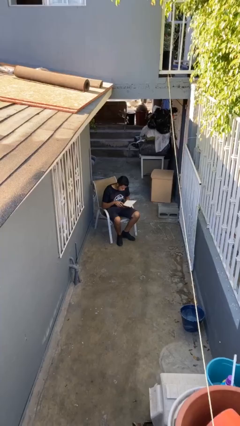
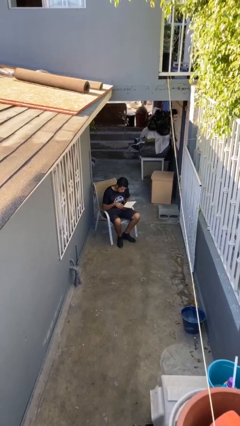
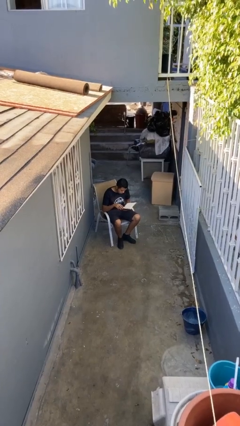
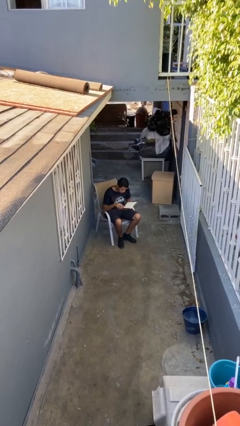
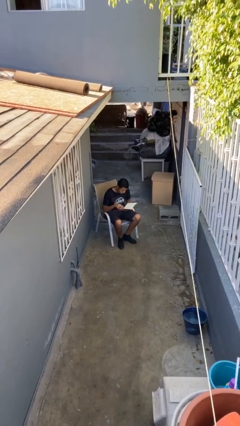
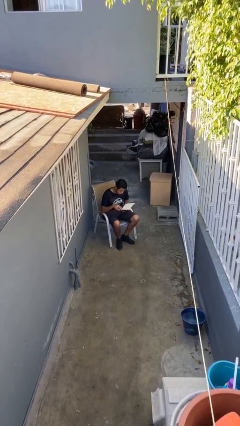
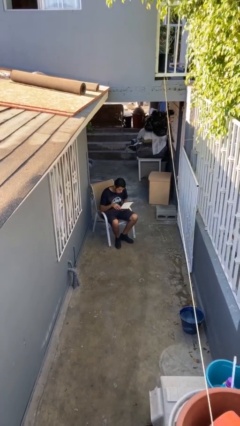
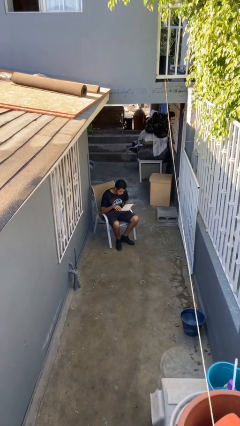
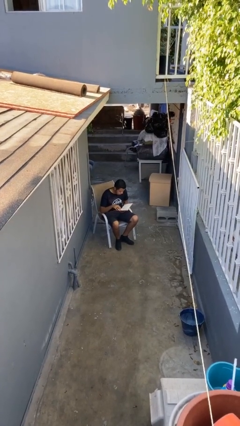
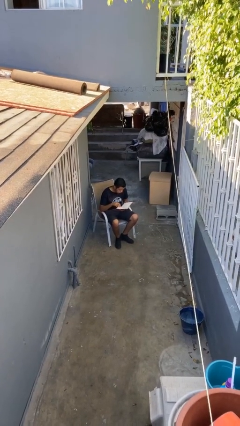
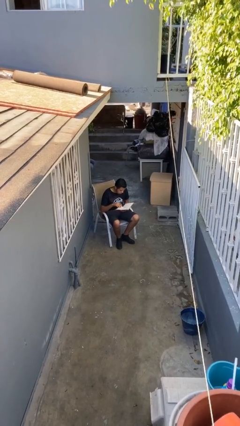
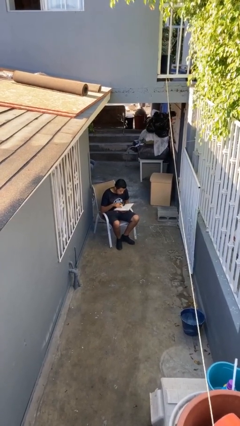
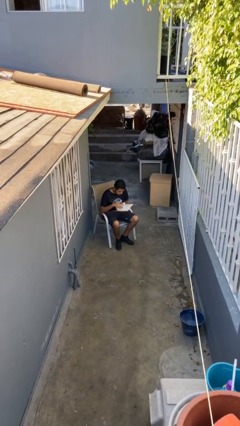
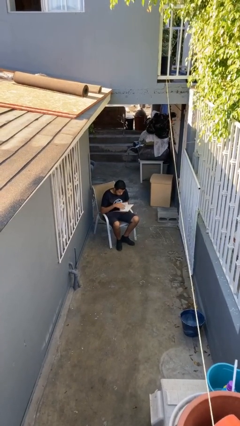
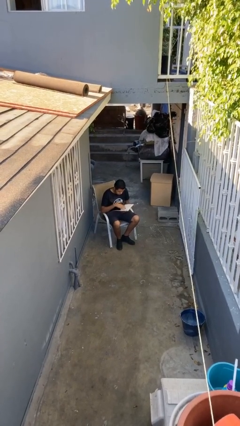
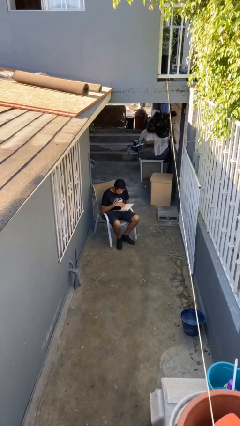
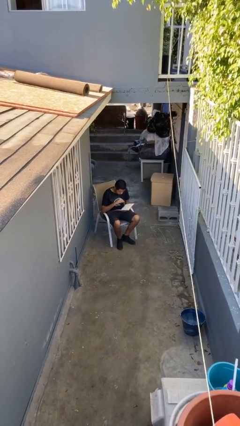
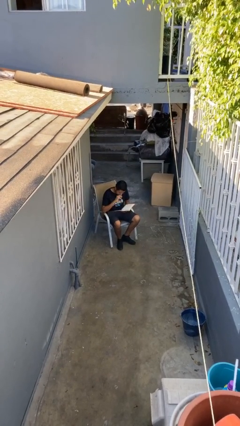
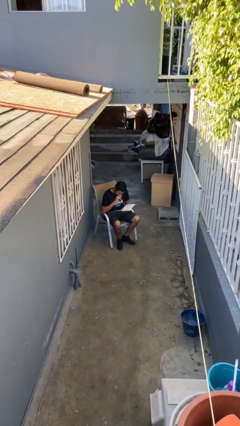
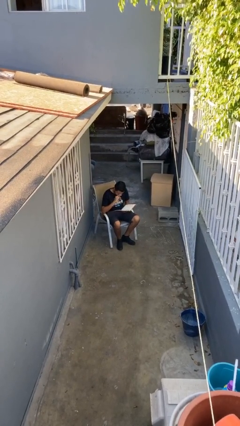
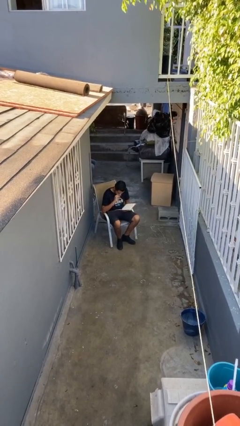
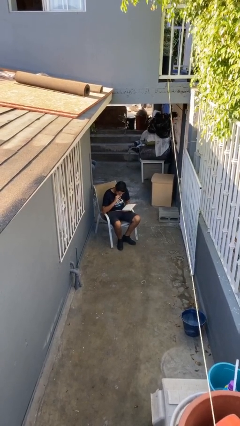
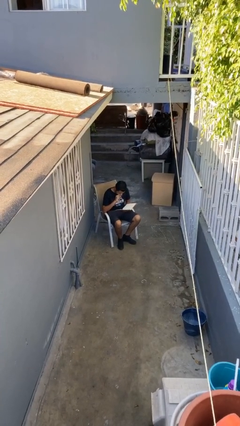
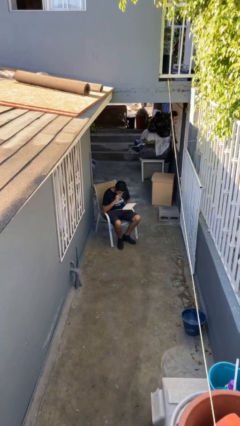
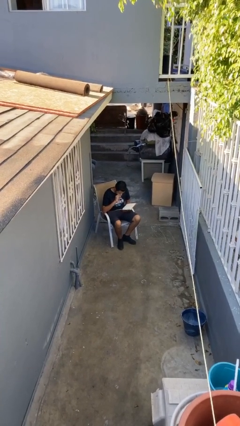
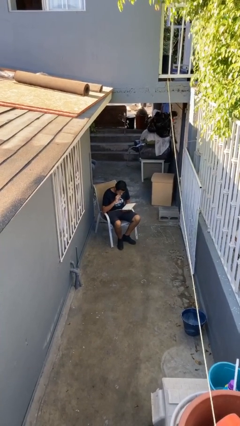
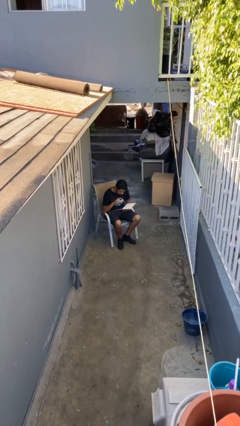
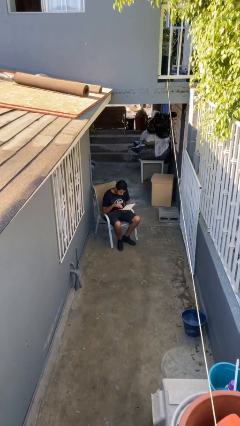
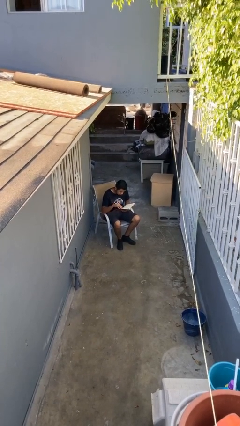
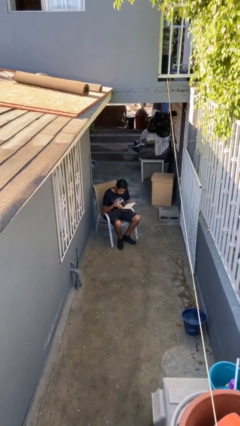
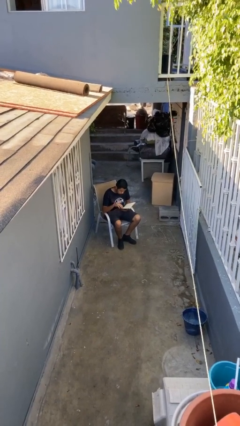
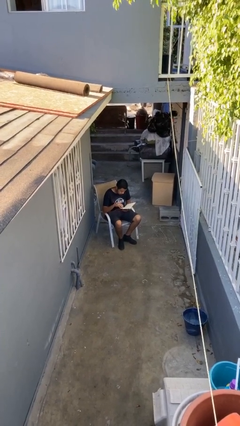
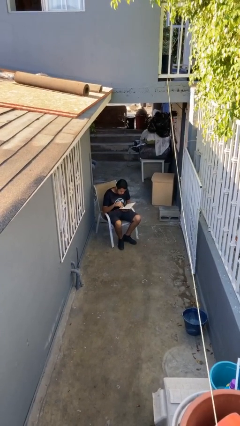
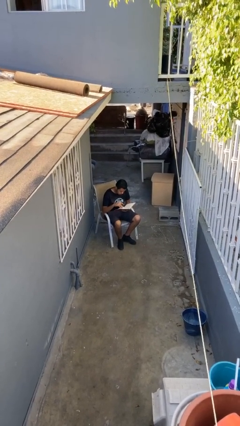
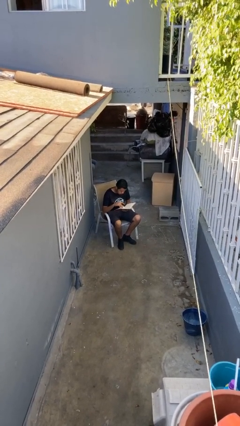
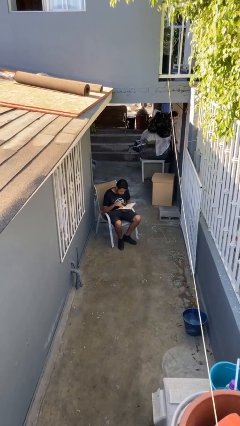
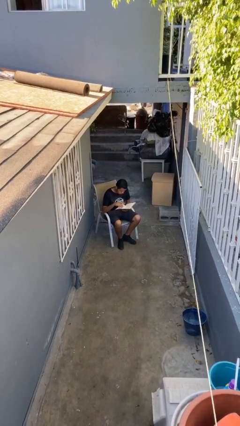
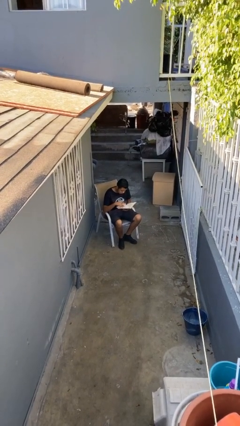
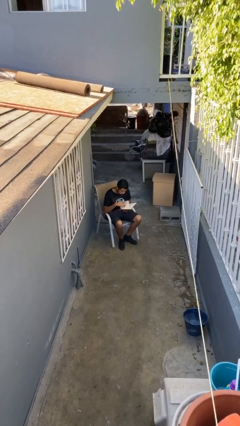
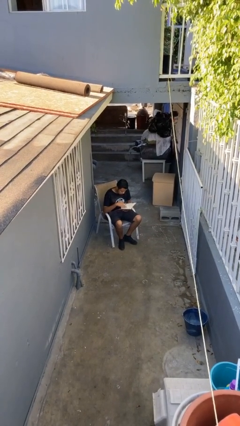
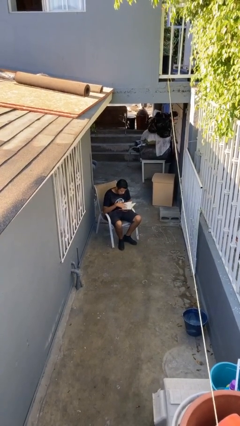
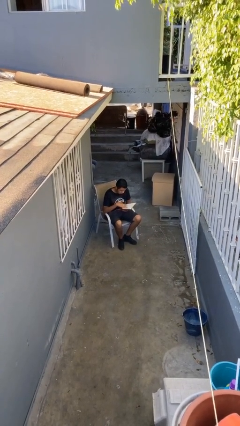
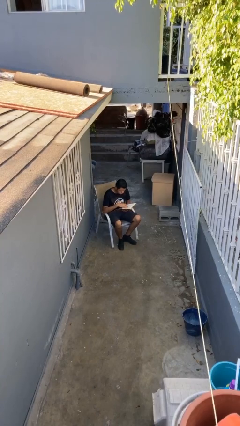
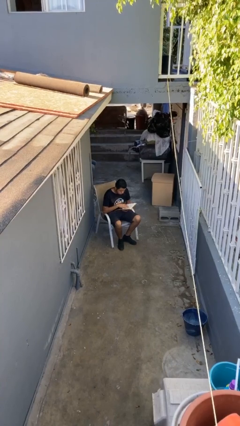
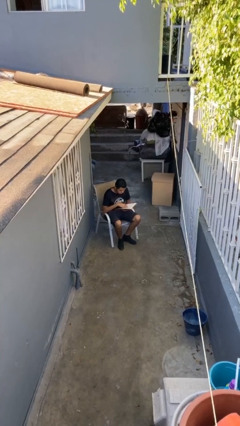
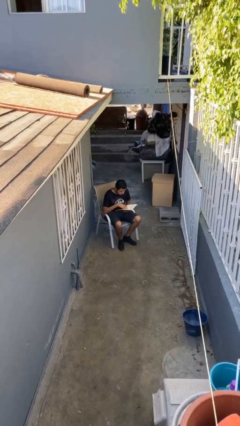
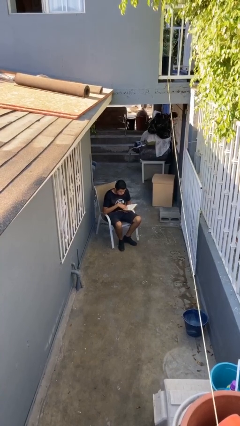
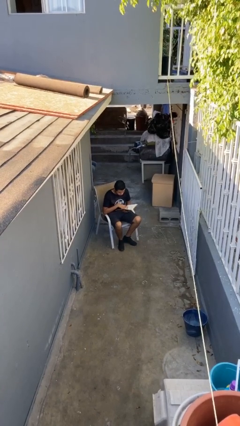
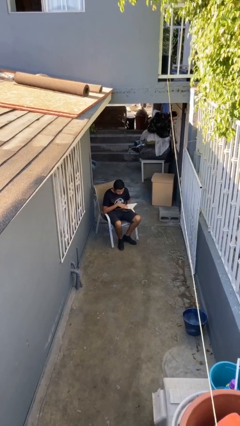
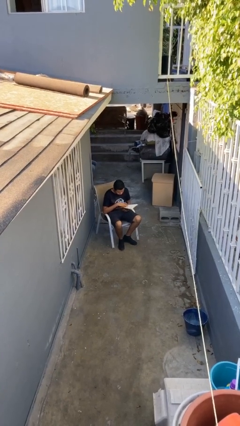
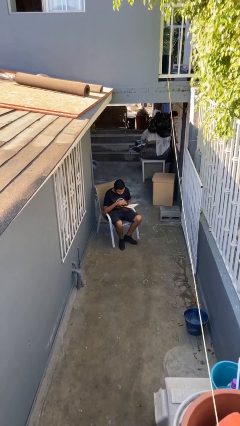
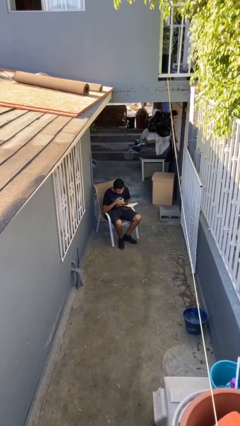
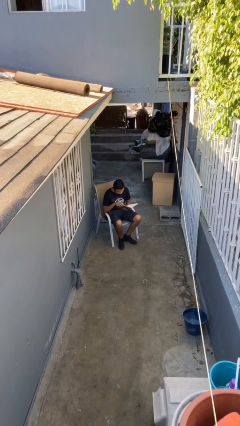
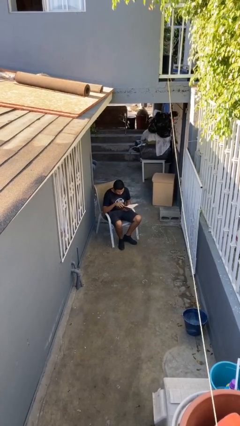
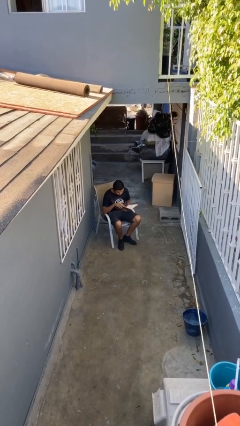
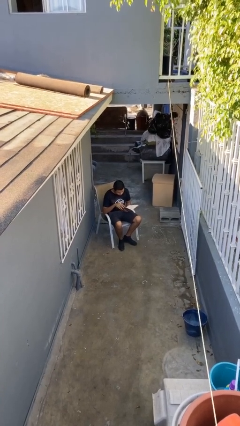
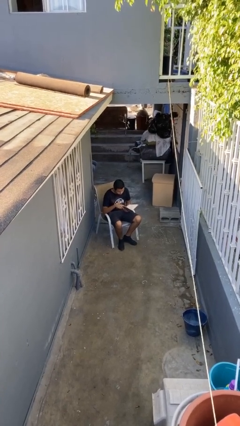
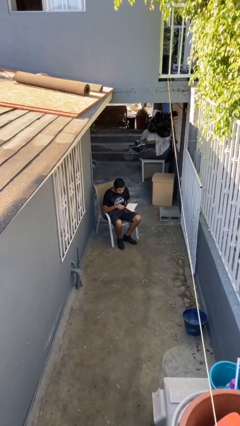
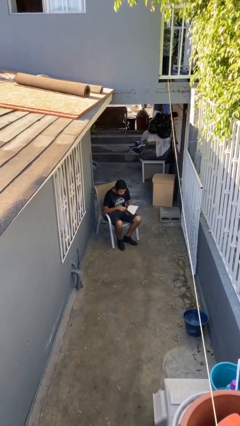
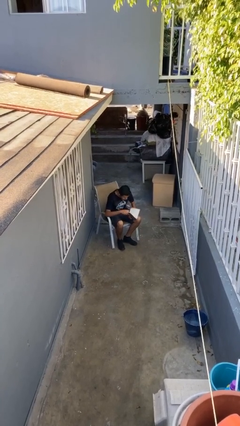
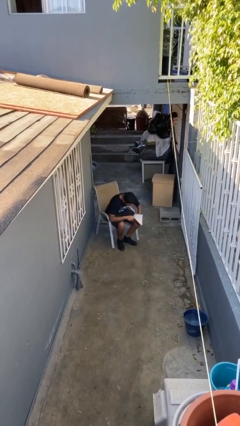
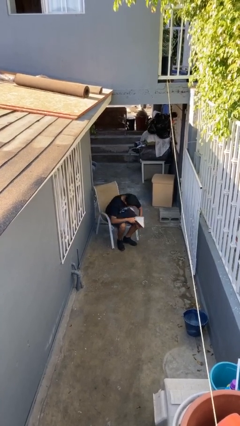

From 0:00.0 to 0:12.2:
person reads document

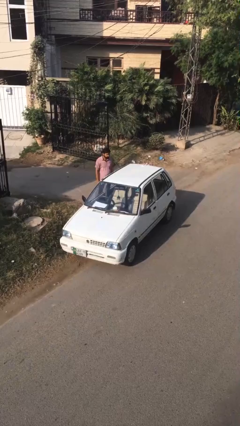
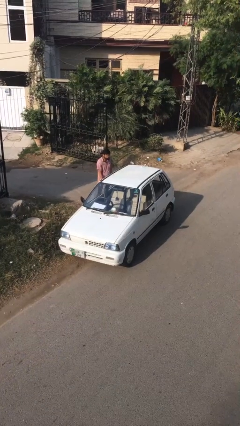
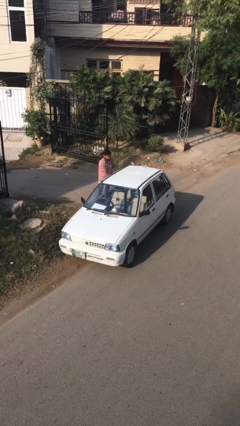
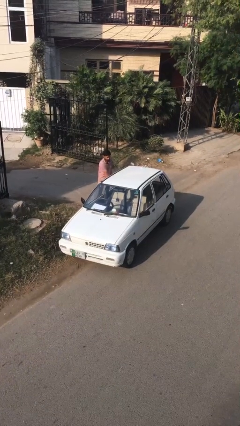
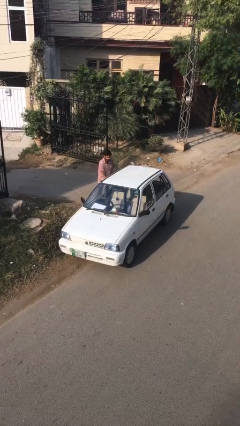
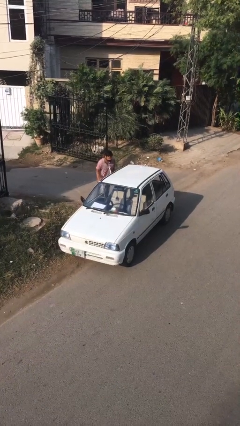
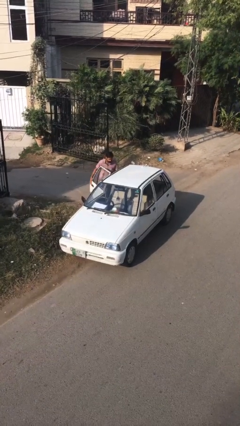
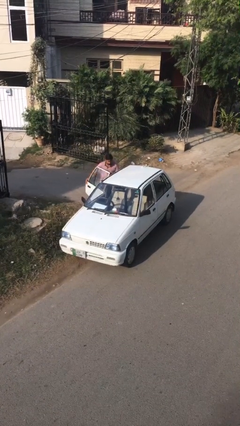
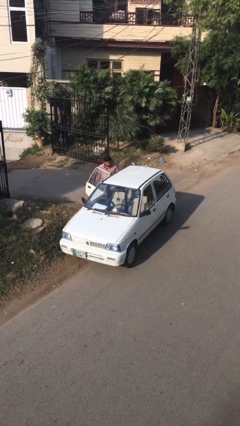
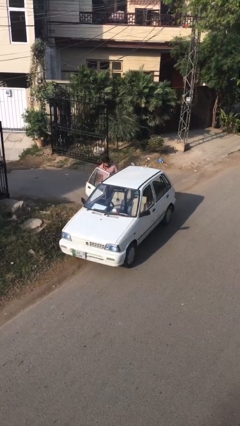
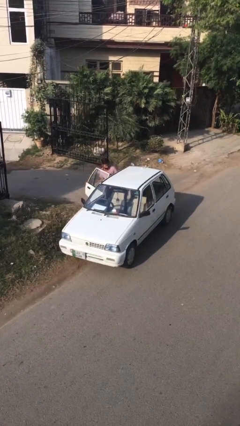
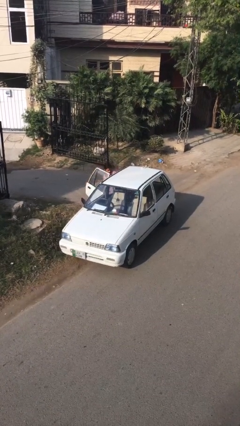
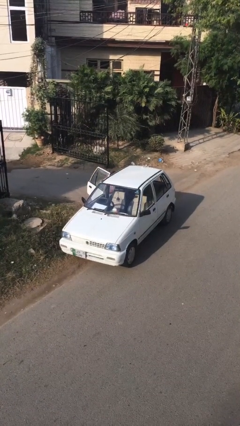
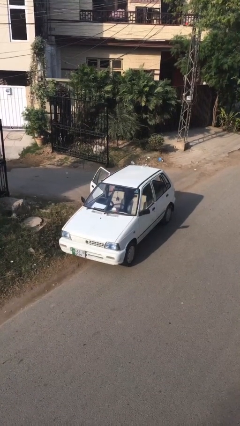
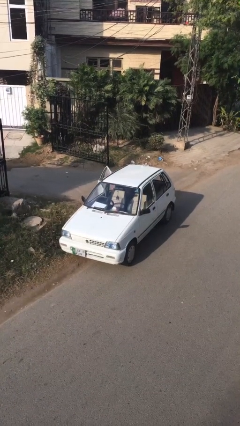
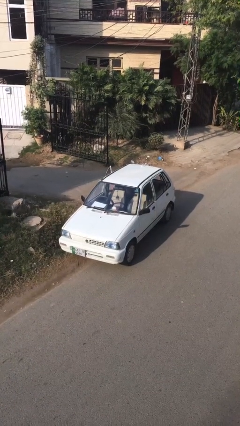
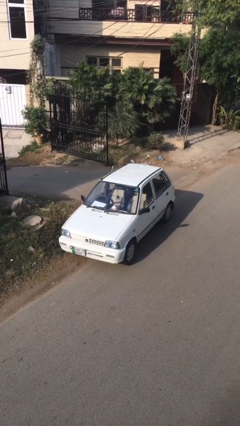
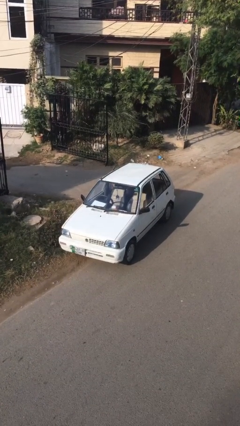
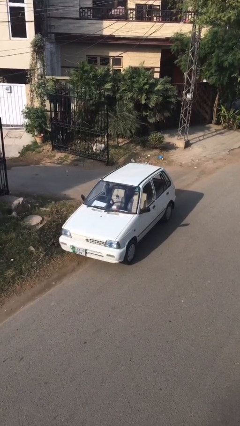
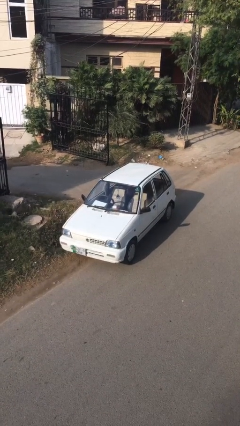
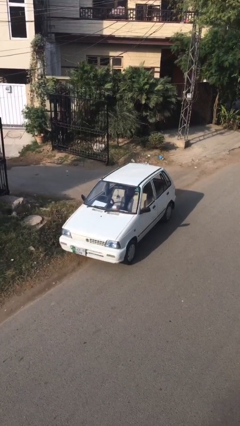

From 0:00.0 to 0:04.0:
car picks up person

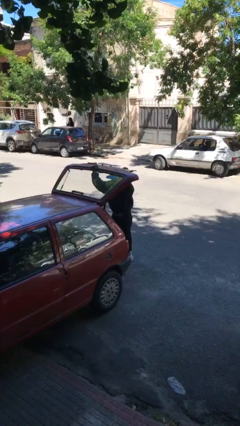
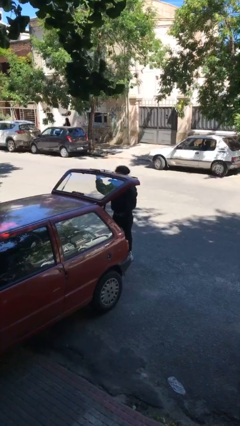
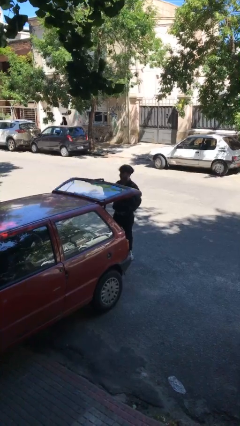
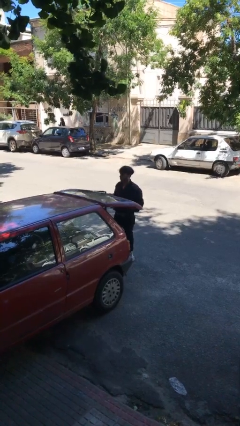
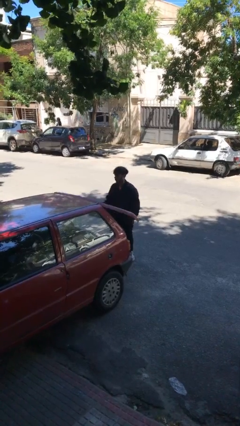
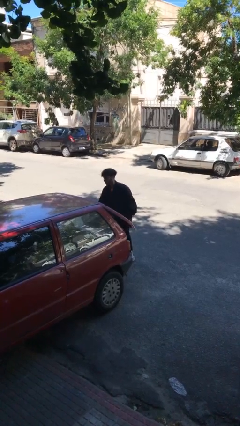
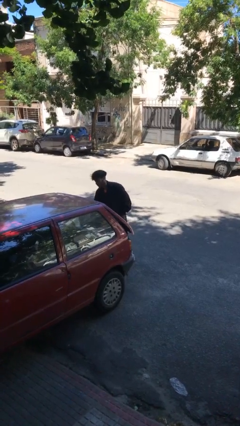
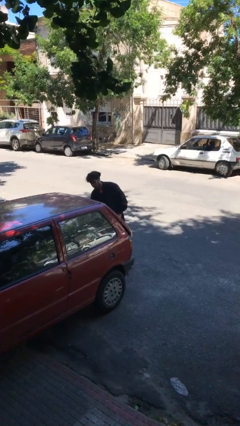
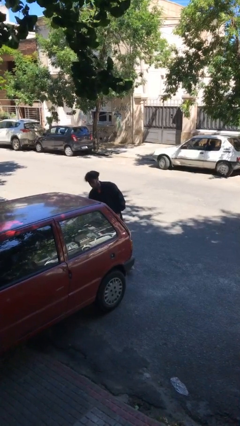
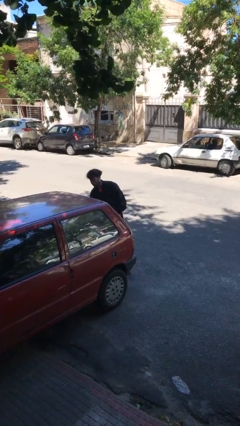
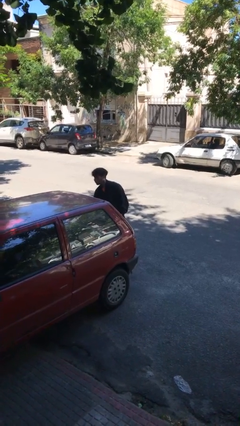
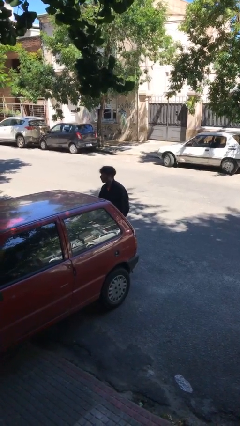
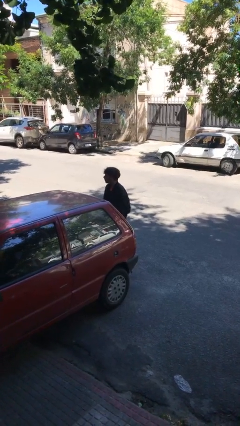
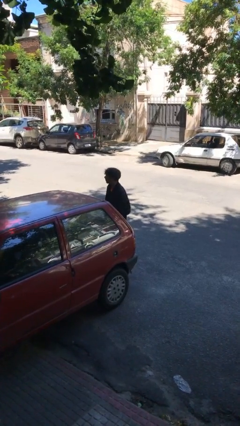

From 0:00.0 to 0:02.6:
person closes car trunk
